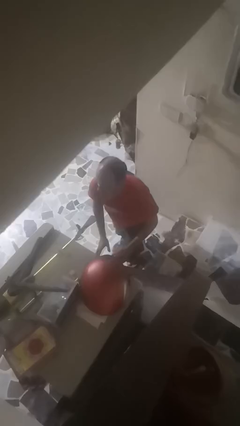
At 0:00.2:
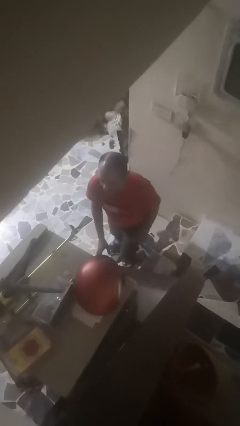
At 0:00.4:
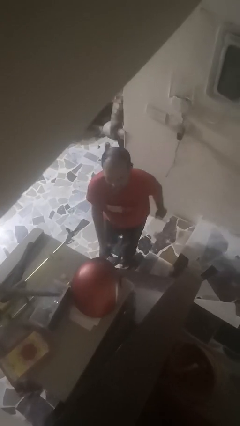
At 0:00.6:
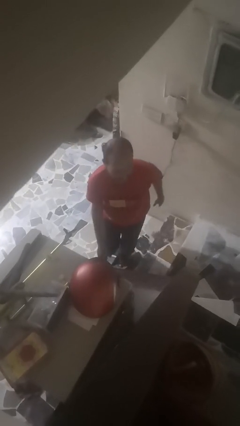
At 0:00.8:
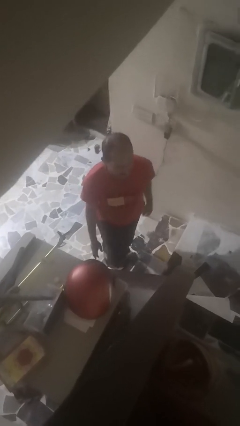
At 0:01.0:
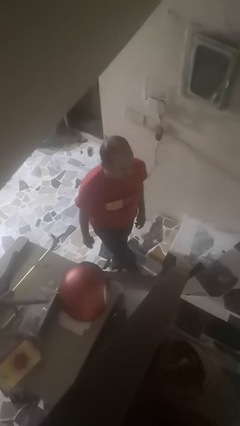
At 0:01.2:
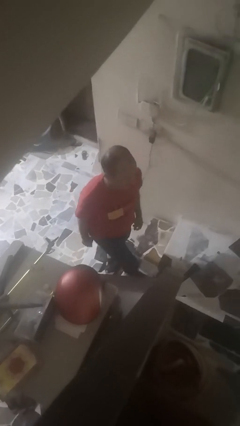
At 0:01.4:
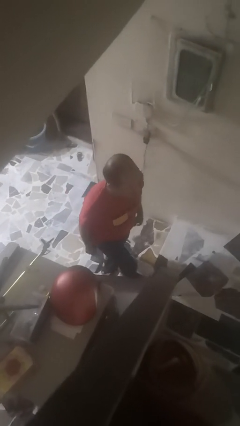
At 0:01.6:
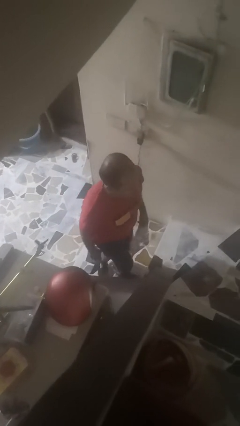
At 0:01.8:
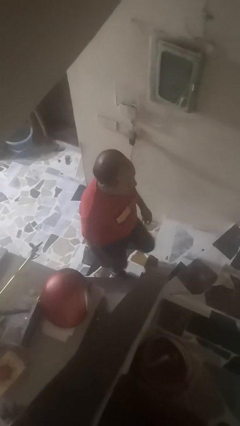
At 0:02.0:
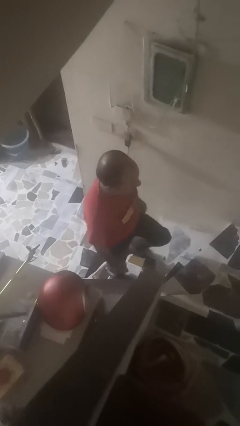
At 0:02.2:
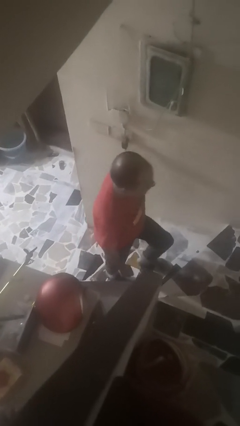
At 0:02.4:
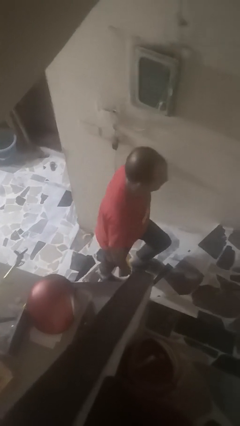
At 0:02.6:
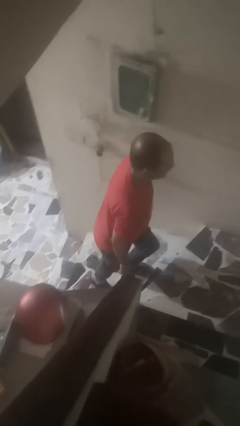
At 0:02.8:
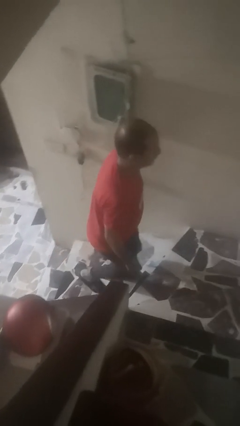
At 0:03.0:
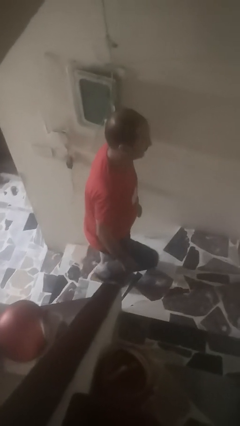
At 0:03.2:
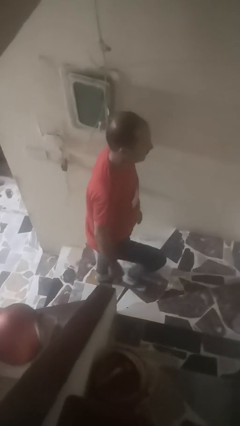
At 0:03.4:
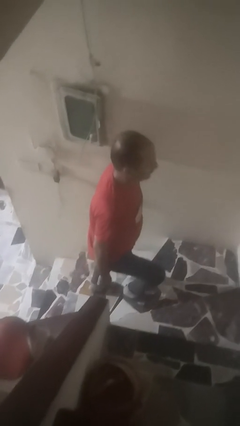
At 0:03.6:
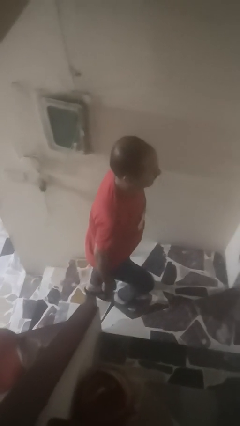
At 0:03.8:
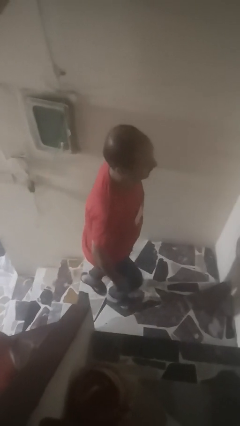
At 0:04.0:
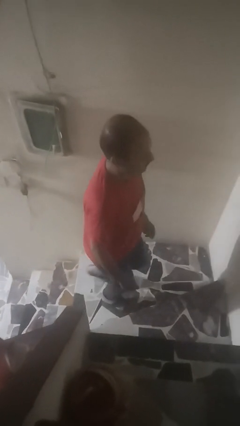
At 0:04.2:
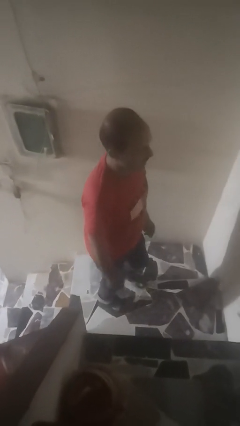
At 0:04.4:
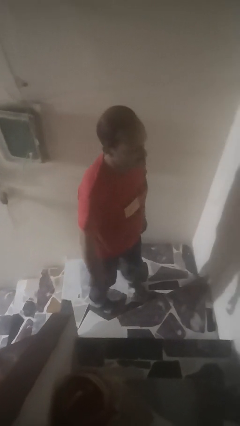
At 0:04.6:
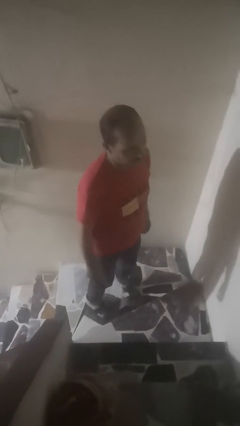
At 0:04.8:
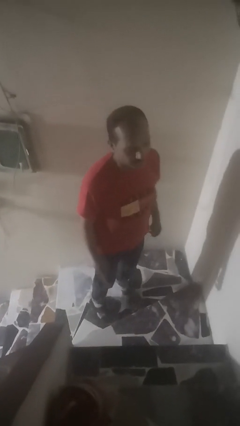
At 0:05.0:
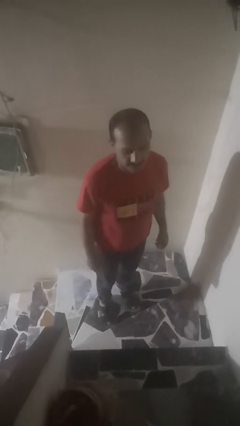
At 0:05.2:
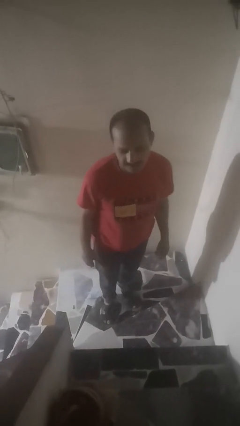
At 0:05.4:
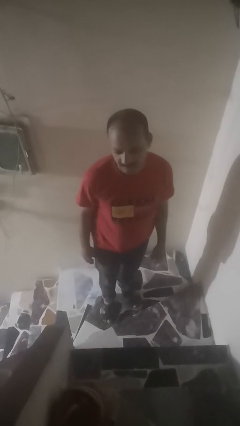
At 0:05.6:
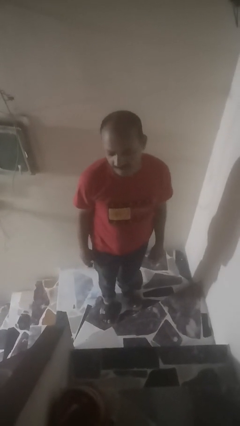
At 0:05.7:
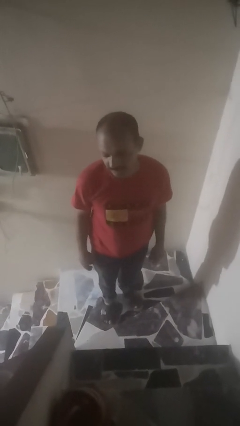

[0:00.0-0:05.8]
person climbs up stairs

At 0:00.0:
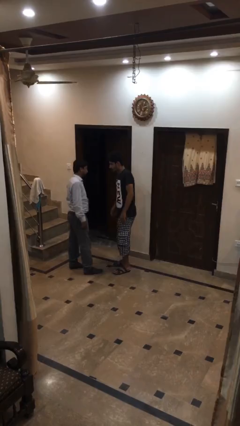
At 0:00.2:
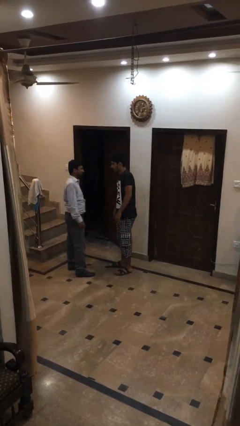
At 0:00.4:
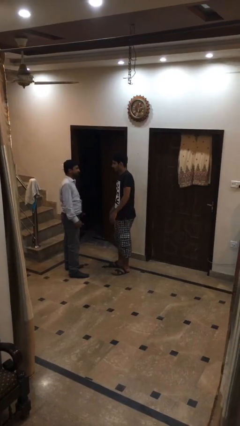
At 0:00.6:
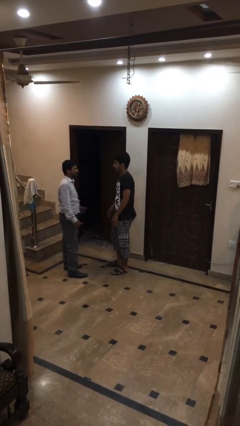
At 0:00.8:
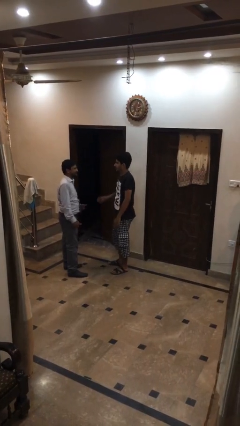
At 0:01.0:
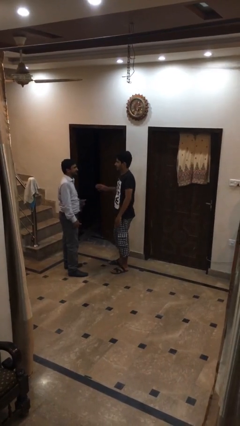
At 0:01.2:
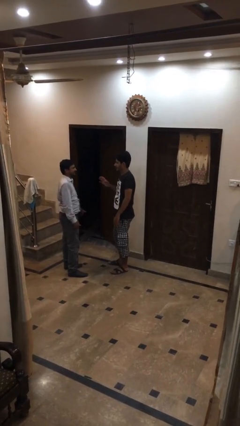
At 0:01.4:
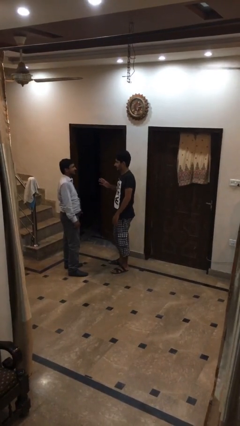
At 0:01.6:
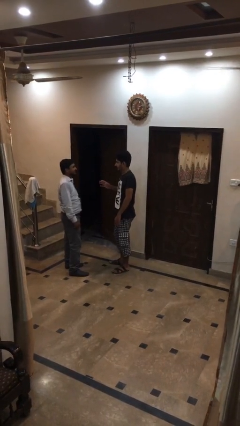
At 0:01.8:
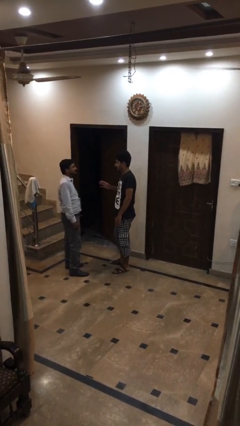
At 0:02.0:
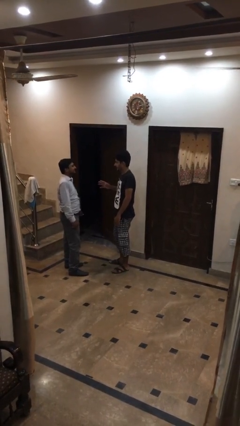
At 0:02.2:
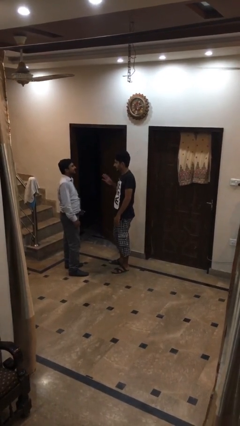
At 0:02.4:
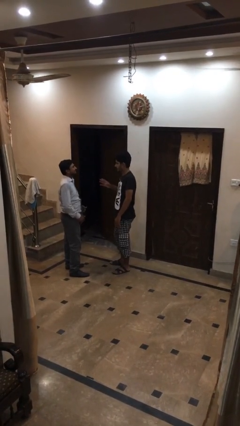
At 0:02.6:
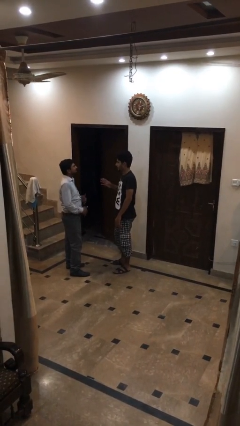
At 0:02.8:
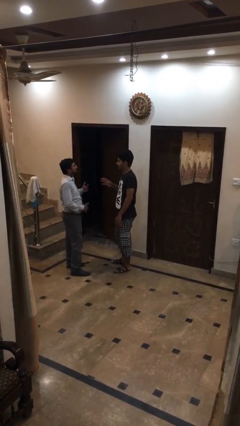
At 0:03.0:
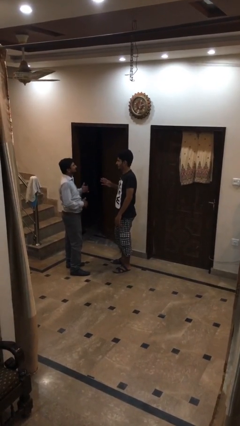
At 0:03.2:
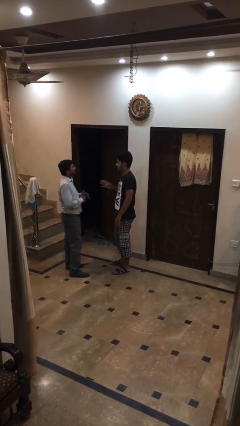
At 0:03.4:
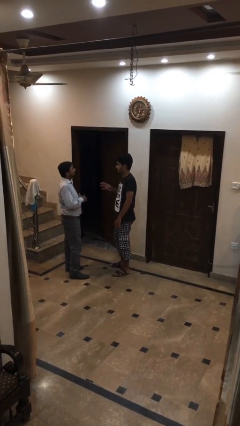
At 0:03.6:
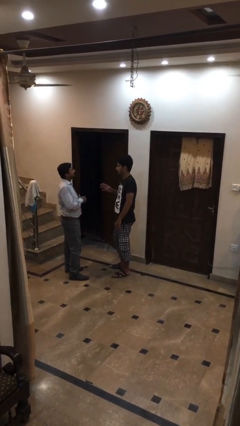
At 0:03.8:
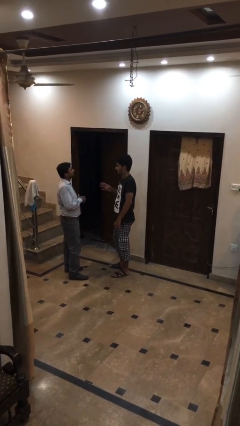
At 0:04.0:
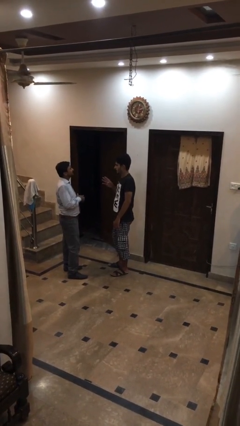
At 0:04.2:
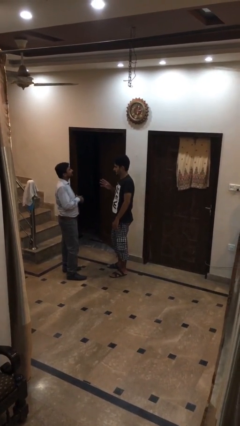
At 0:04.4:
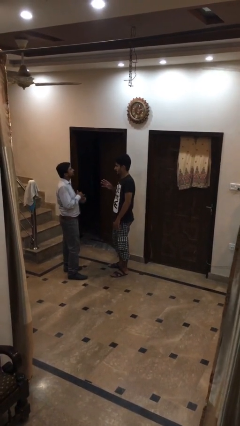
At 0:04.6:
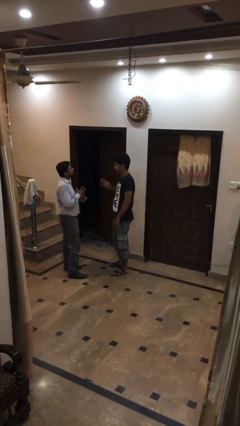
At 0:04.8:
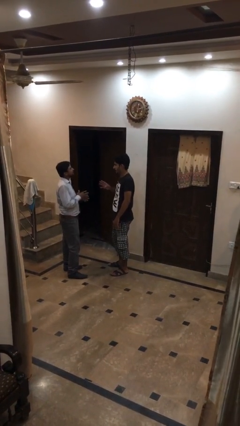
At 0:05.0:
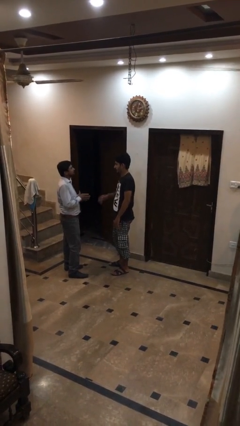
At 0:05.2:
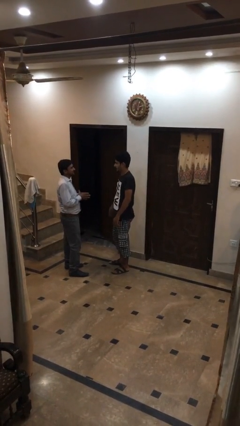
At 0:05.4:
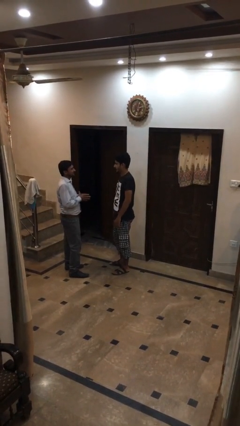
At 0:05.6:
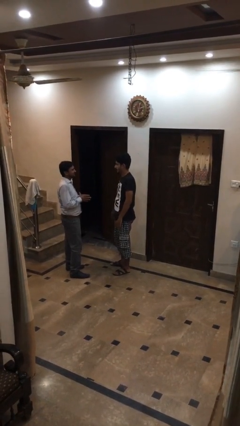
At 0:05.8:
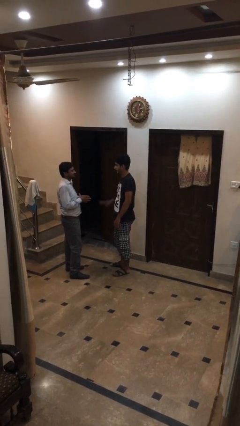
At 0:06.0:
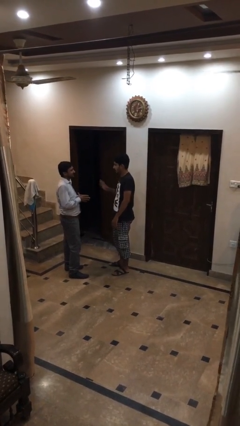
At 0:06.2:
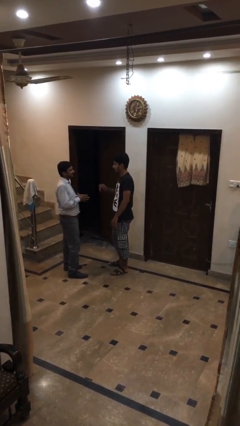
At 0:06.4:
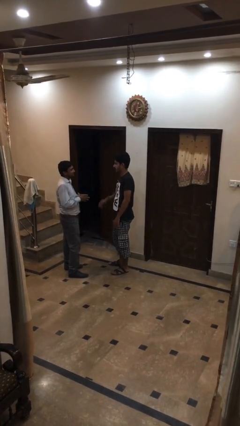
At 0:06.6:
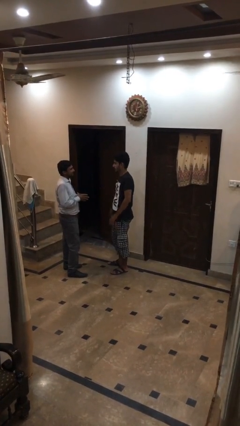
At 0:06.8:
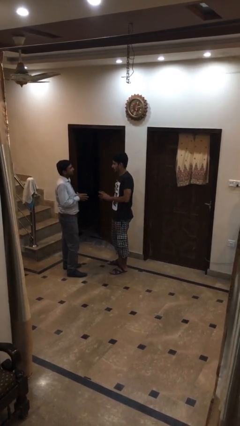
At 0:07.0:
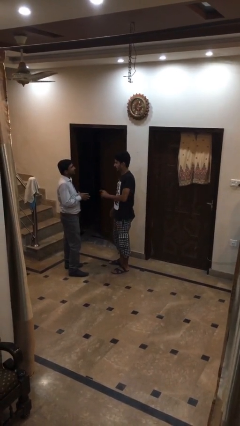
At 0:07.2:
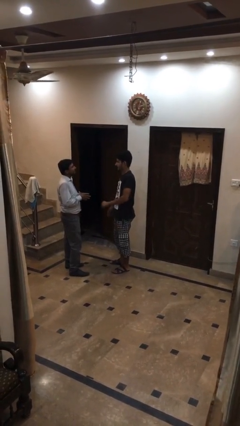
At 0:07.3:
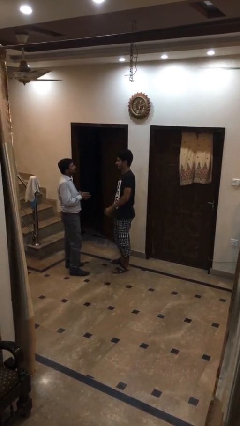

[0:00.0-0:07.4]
person talks to person

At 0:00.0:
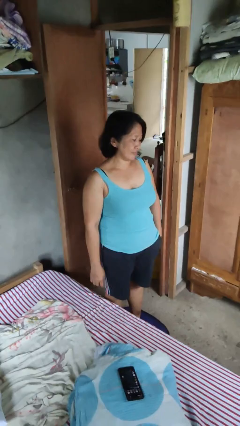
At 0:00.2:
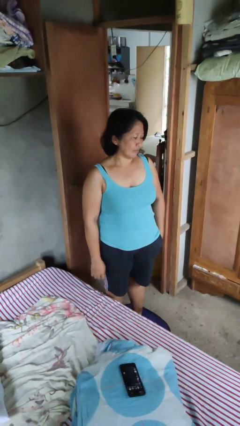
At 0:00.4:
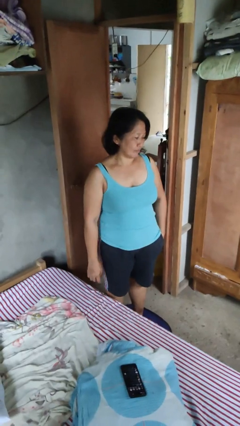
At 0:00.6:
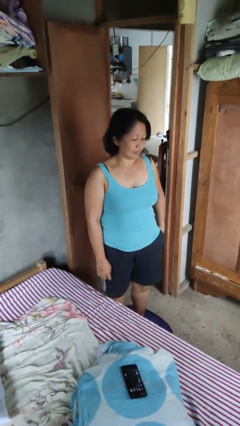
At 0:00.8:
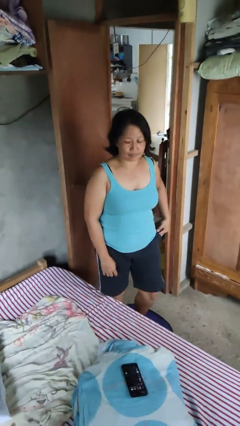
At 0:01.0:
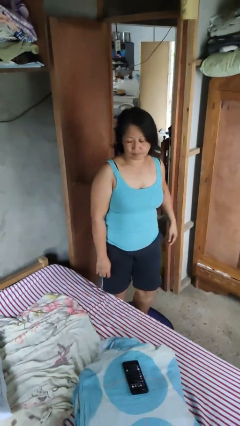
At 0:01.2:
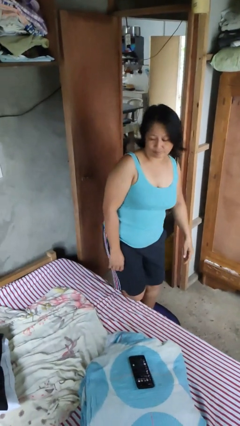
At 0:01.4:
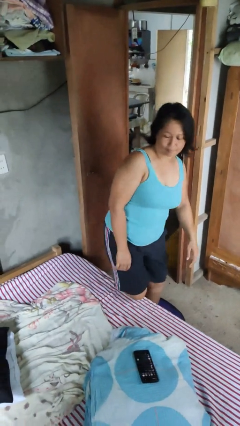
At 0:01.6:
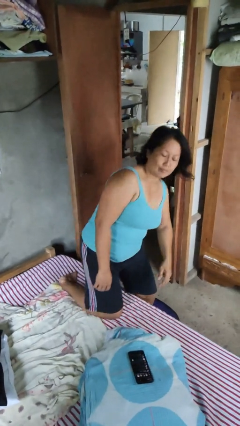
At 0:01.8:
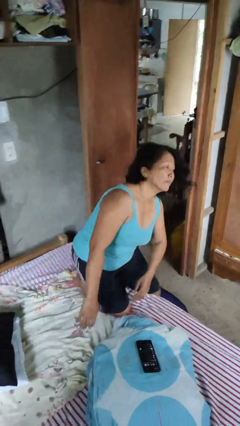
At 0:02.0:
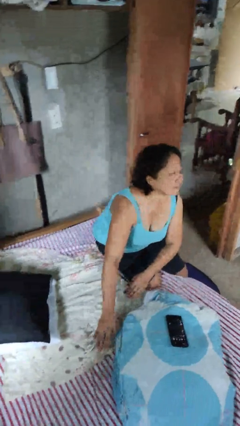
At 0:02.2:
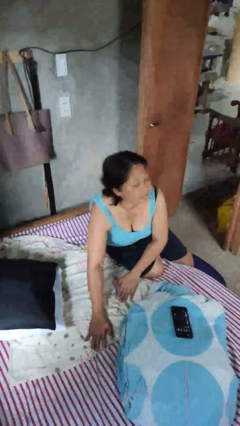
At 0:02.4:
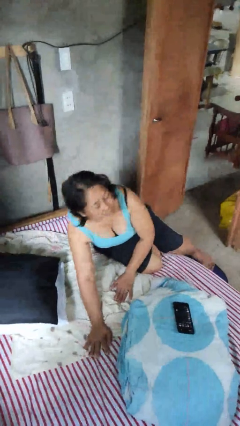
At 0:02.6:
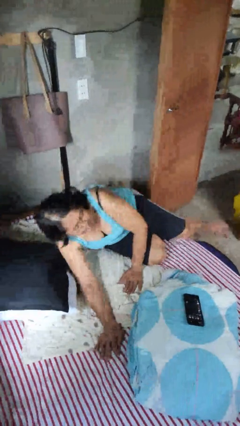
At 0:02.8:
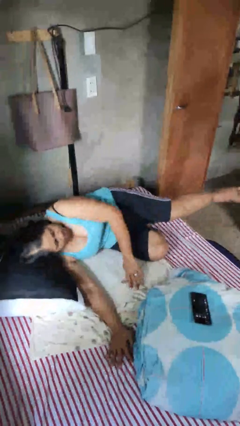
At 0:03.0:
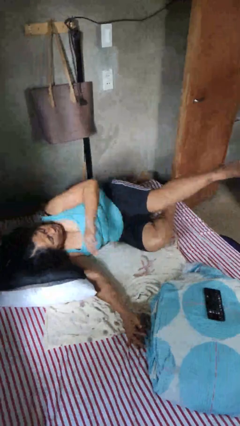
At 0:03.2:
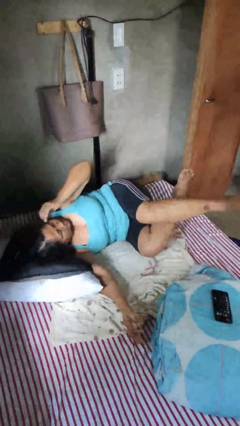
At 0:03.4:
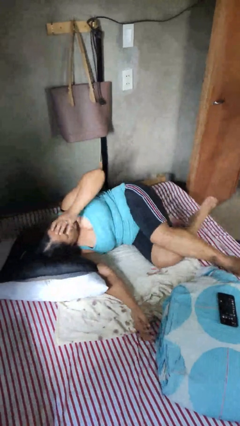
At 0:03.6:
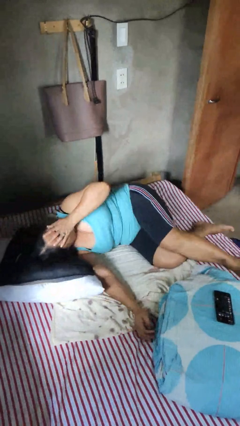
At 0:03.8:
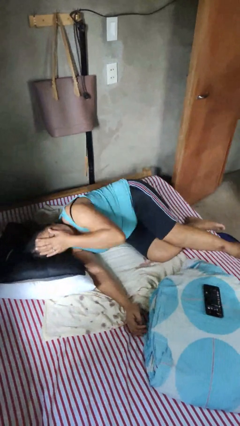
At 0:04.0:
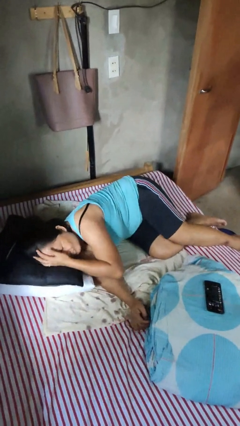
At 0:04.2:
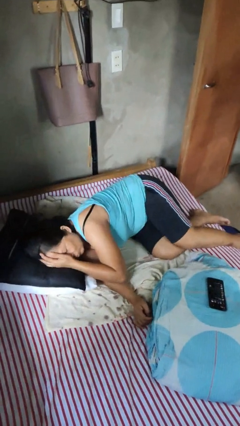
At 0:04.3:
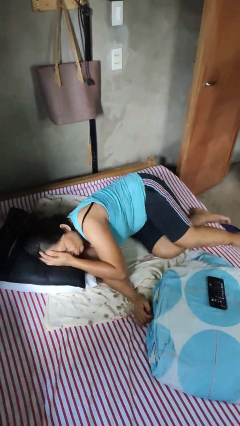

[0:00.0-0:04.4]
person lies down on bed

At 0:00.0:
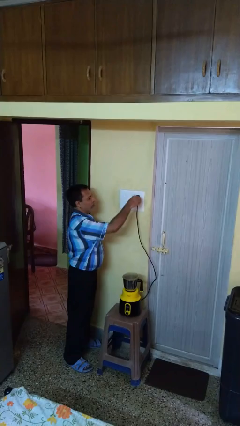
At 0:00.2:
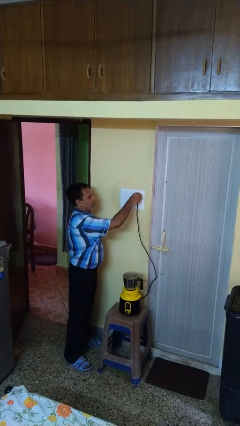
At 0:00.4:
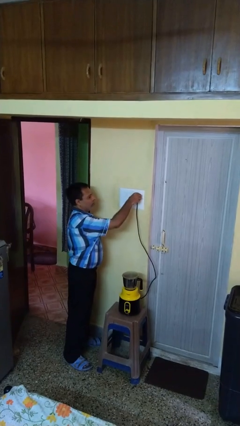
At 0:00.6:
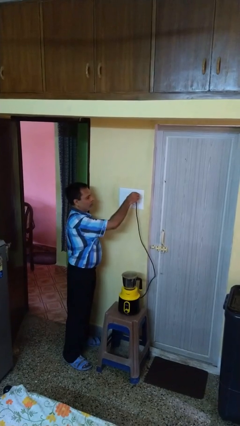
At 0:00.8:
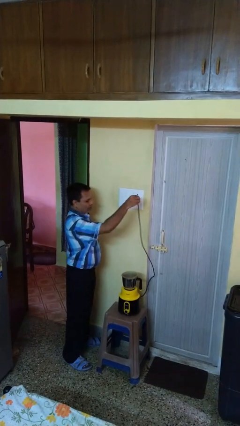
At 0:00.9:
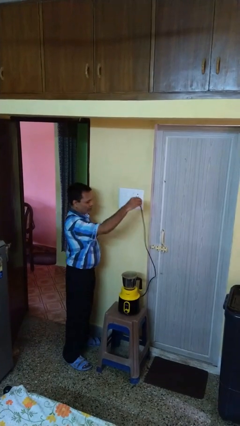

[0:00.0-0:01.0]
person unplugs from electrical socket
